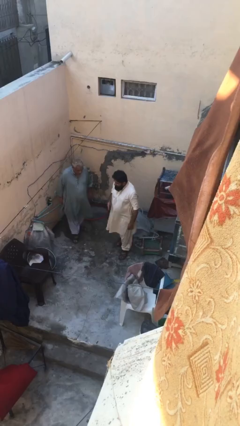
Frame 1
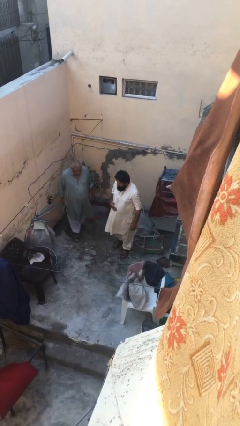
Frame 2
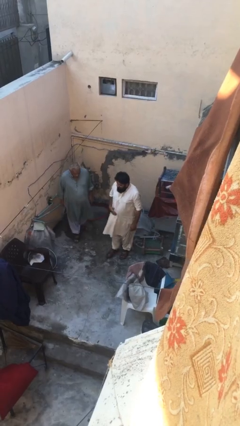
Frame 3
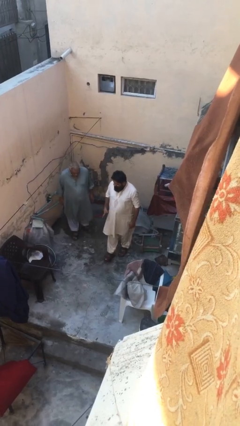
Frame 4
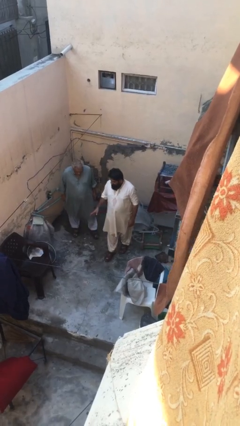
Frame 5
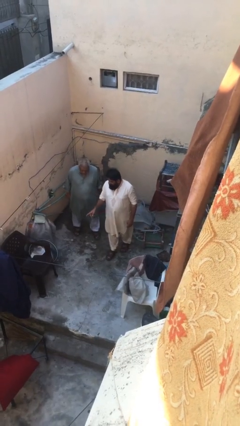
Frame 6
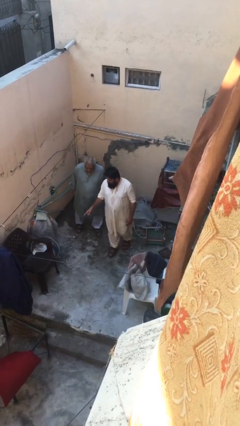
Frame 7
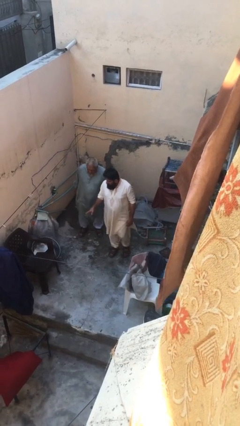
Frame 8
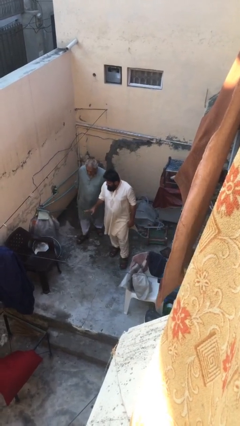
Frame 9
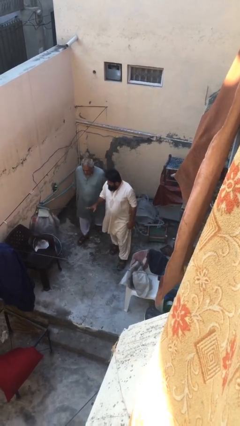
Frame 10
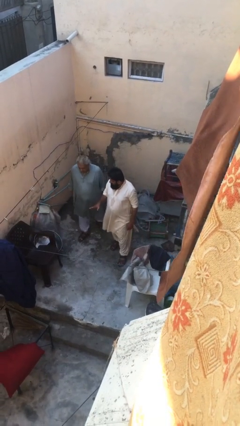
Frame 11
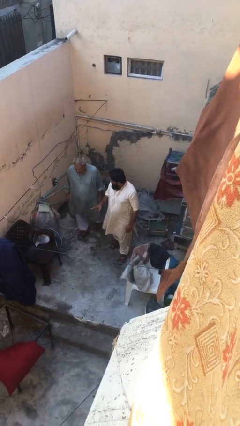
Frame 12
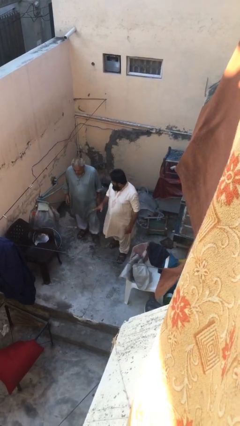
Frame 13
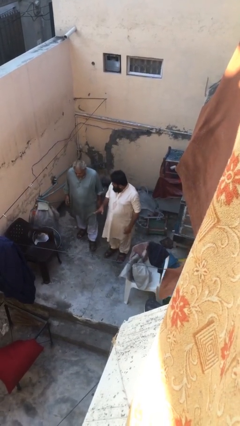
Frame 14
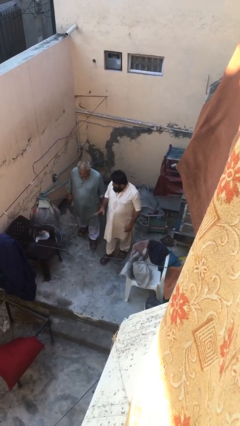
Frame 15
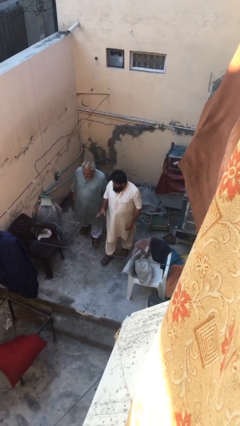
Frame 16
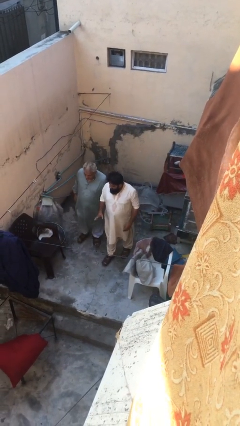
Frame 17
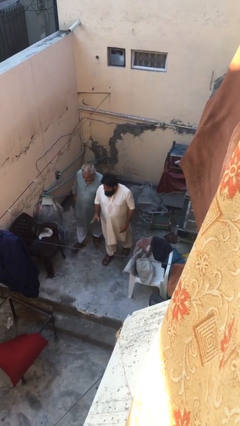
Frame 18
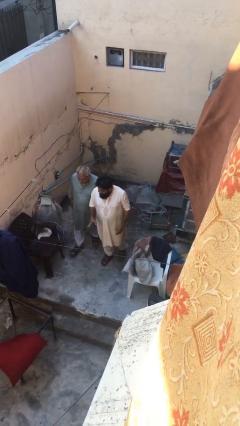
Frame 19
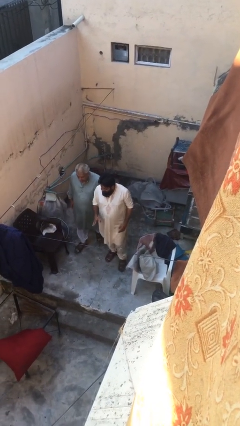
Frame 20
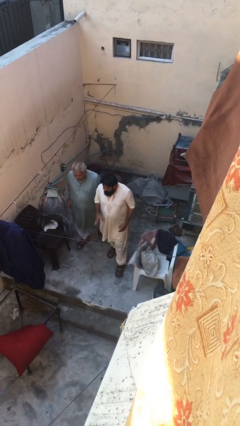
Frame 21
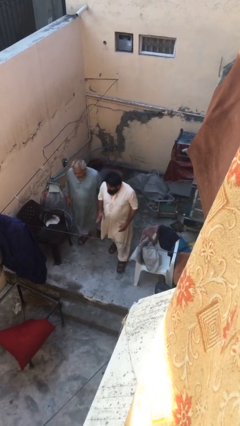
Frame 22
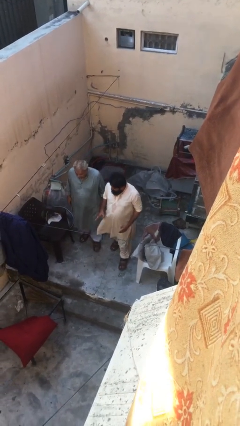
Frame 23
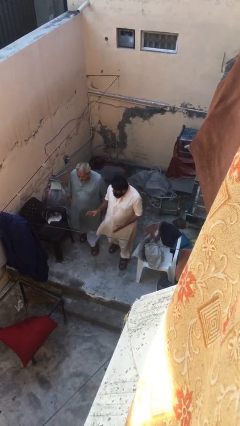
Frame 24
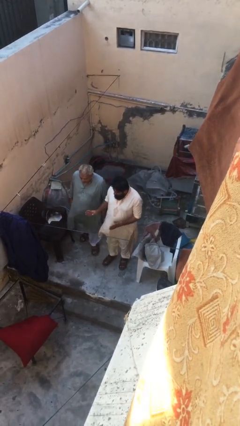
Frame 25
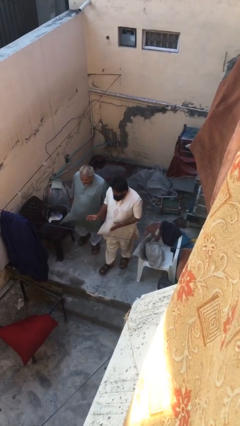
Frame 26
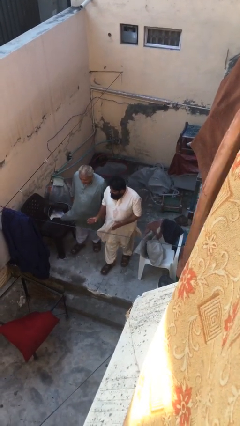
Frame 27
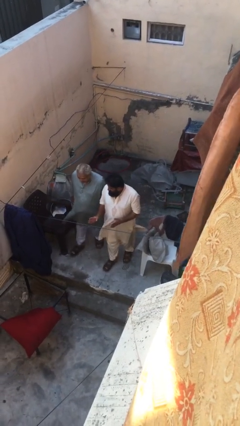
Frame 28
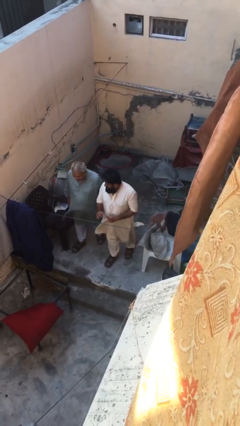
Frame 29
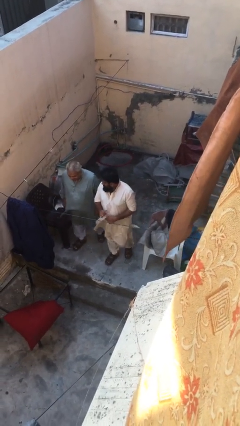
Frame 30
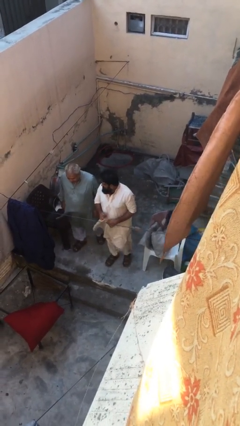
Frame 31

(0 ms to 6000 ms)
person talks to person

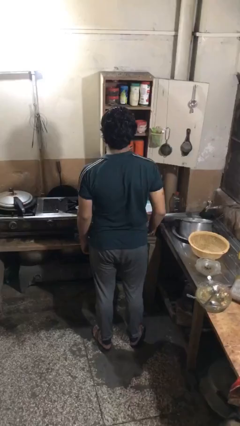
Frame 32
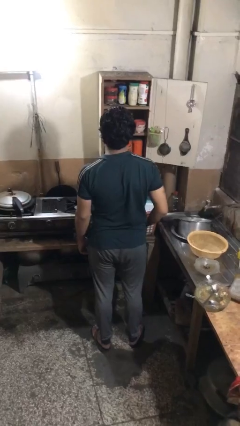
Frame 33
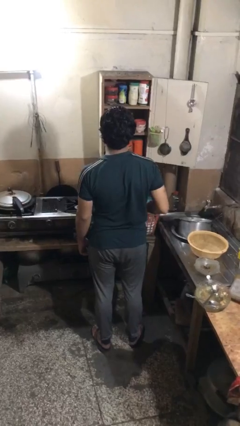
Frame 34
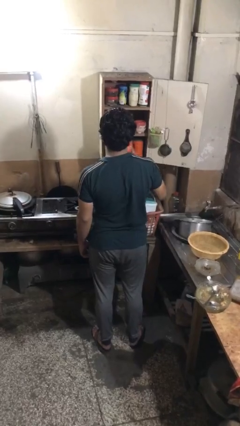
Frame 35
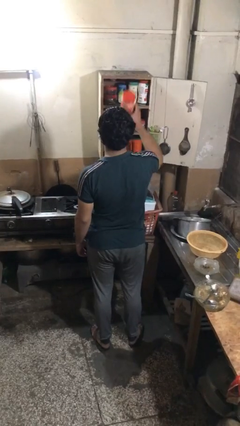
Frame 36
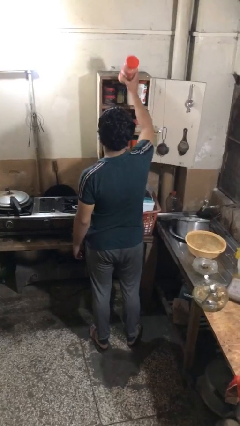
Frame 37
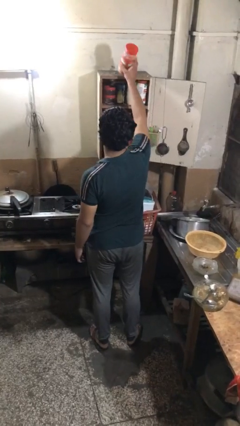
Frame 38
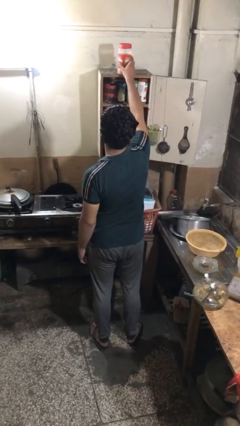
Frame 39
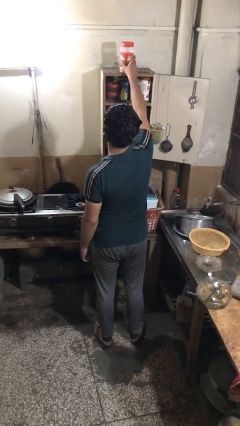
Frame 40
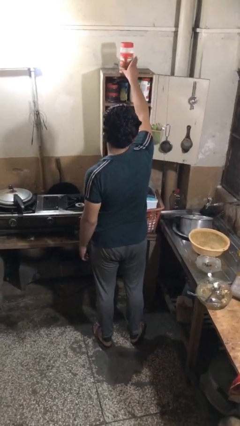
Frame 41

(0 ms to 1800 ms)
person takes object from cabinet

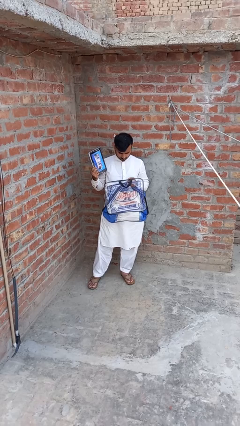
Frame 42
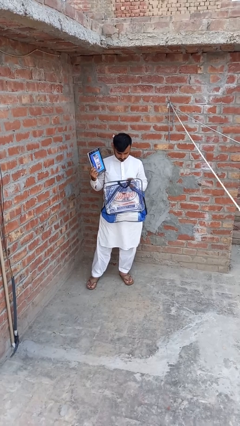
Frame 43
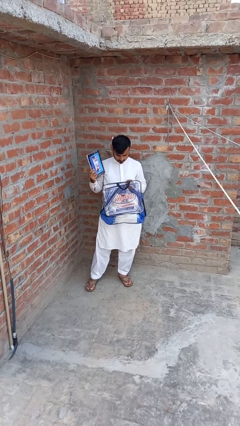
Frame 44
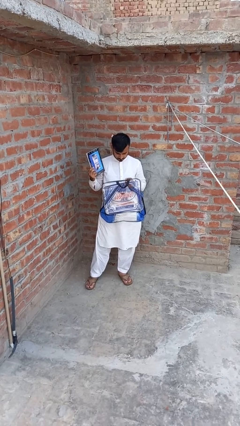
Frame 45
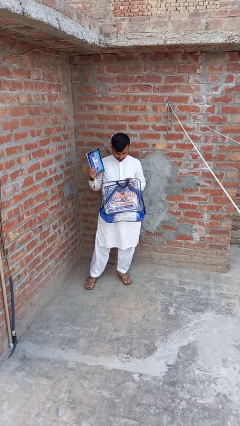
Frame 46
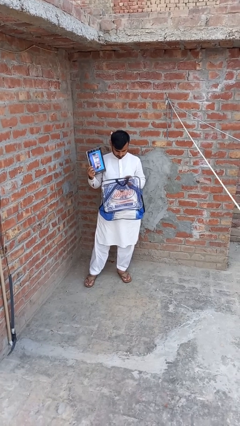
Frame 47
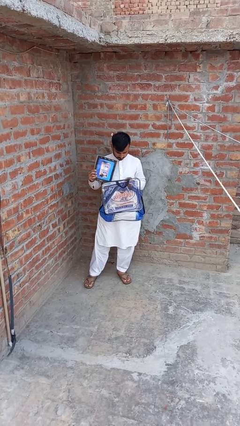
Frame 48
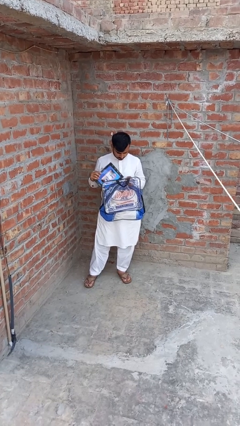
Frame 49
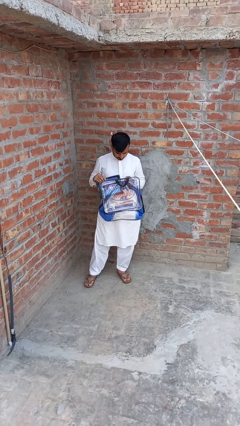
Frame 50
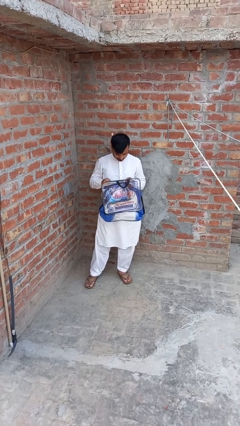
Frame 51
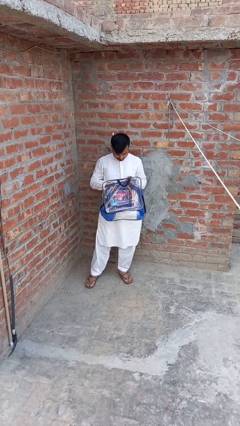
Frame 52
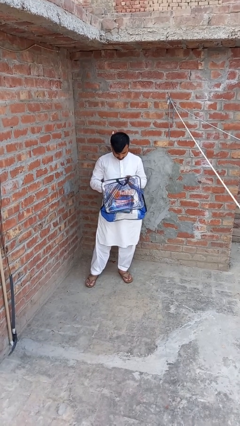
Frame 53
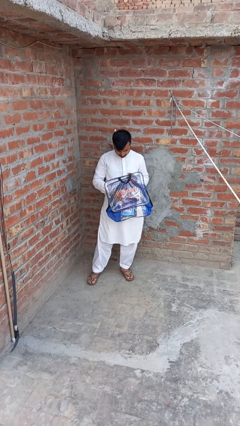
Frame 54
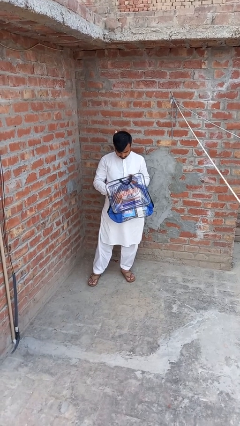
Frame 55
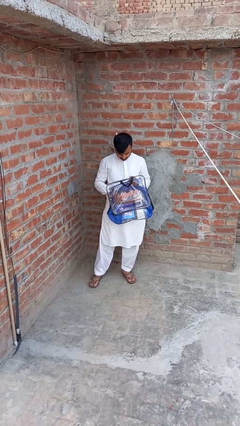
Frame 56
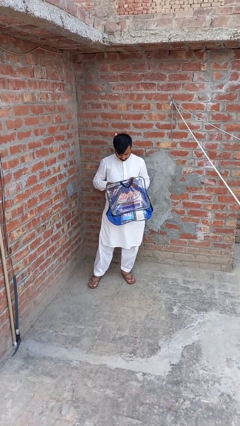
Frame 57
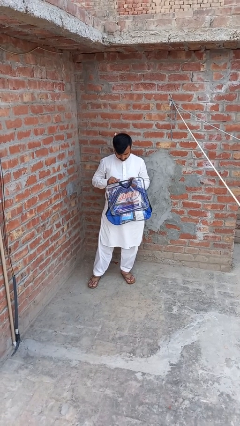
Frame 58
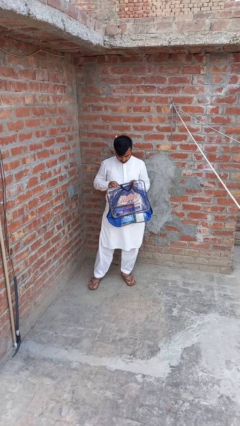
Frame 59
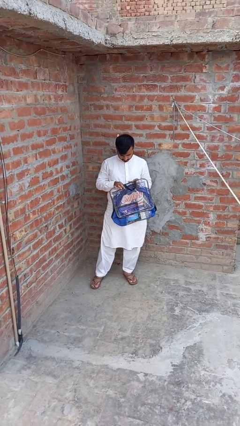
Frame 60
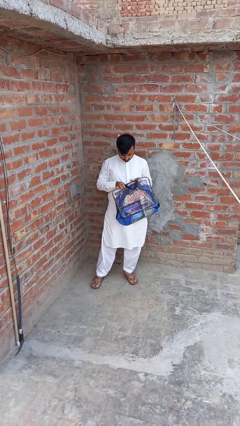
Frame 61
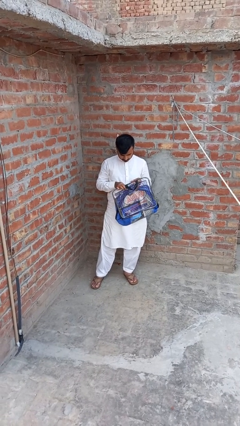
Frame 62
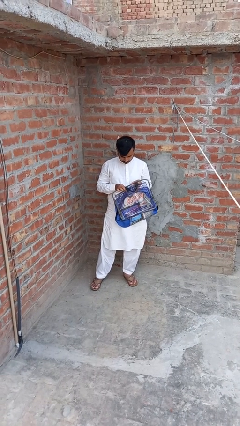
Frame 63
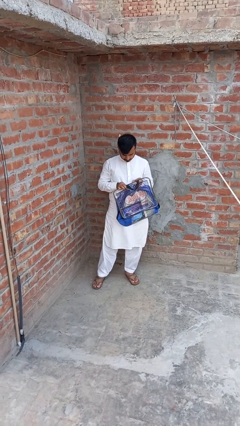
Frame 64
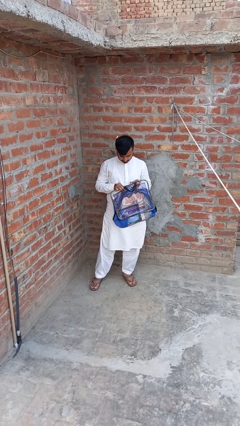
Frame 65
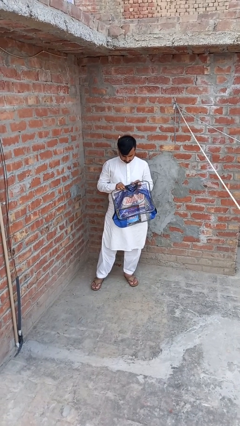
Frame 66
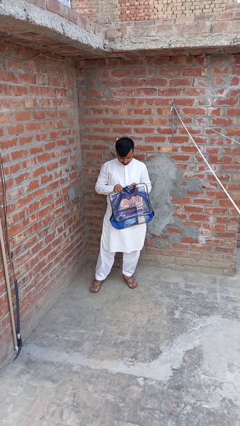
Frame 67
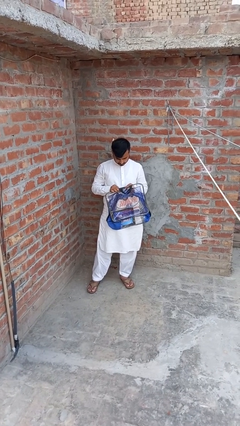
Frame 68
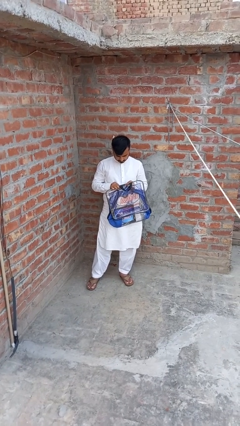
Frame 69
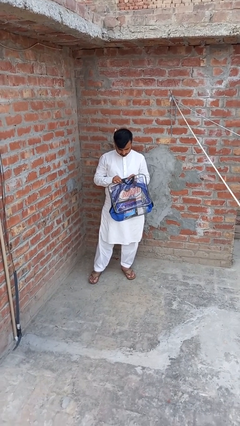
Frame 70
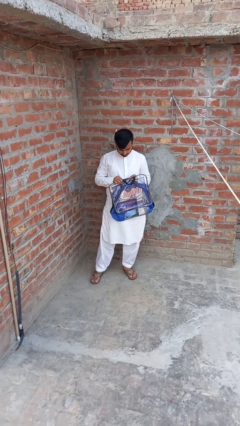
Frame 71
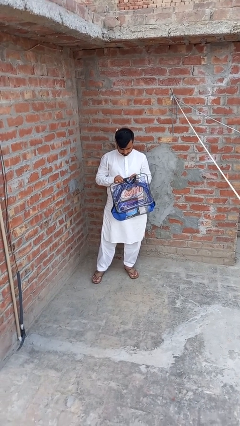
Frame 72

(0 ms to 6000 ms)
person puts object into backpack

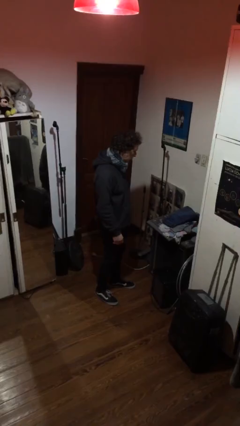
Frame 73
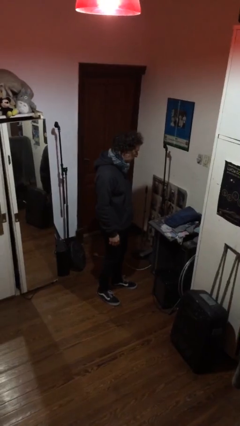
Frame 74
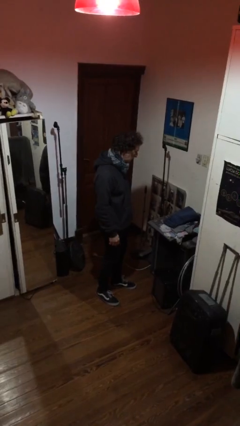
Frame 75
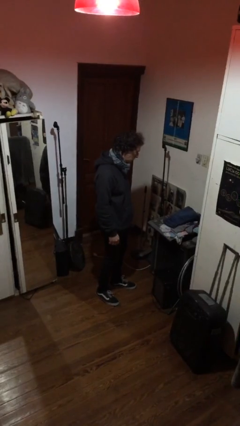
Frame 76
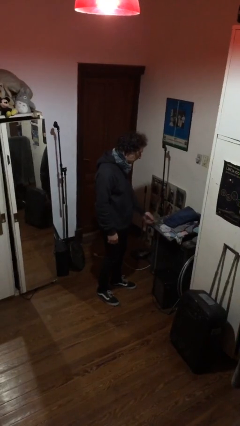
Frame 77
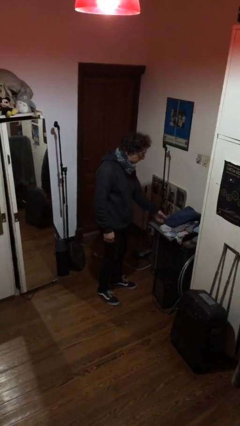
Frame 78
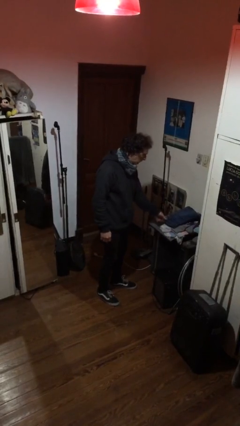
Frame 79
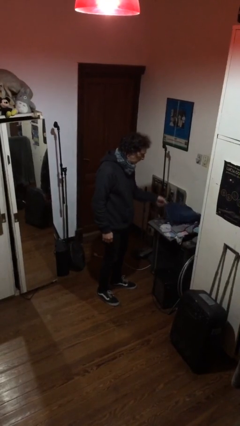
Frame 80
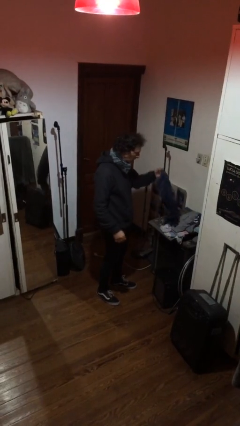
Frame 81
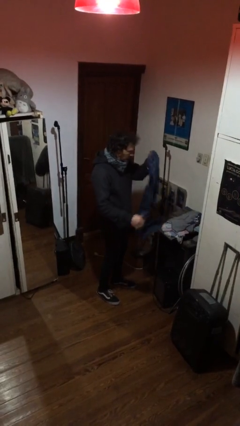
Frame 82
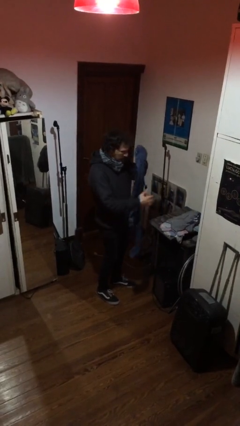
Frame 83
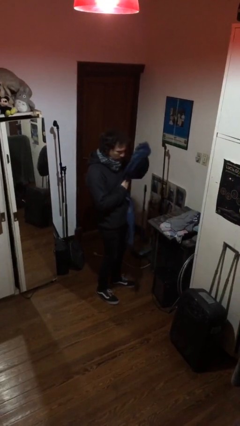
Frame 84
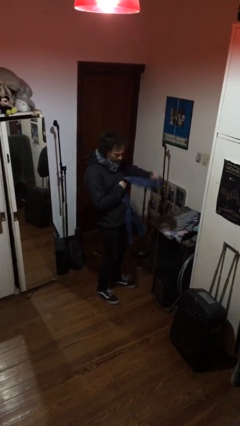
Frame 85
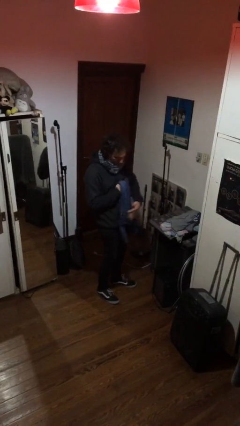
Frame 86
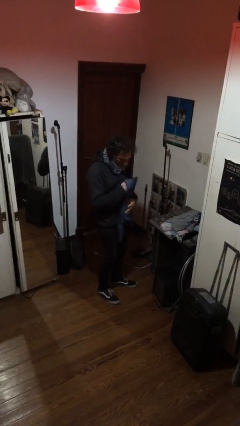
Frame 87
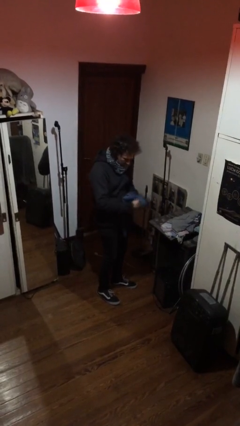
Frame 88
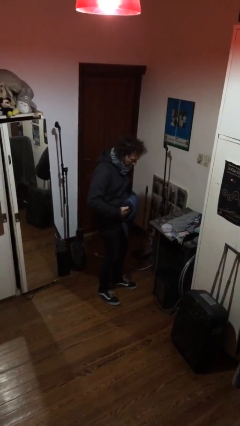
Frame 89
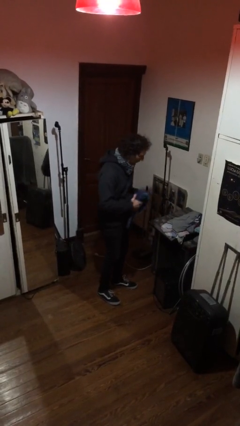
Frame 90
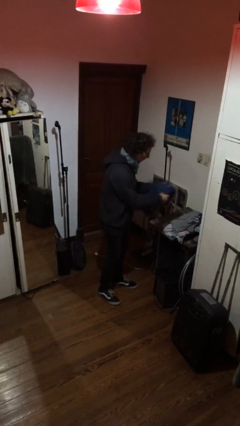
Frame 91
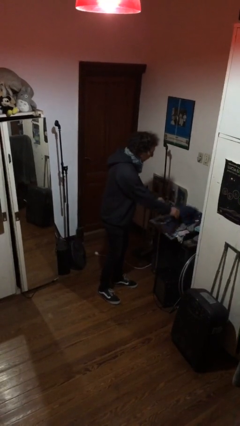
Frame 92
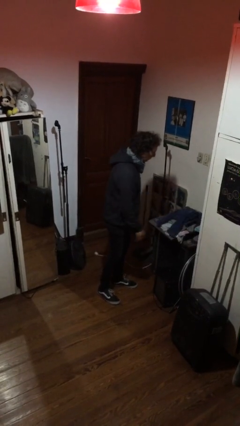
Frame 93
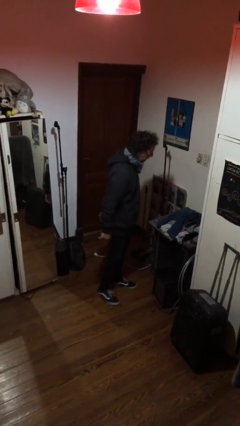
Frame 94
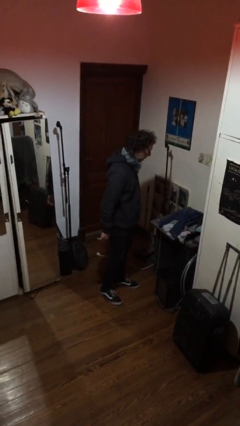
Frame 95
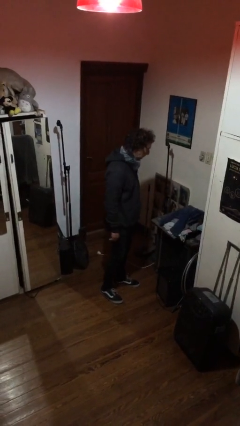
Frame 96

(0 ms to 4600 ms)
person folds pants
